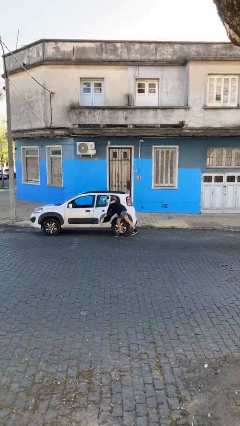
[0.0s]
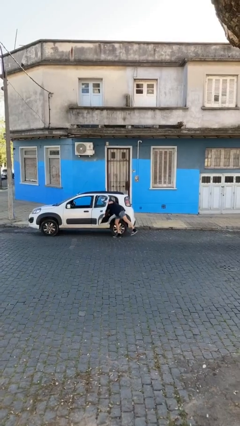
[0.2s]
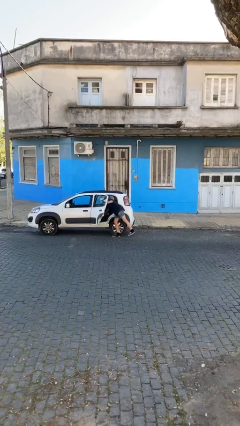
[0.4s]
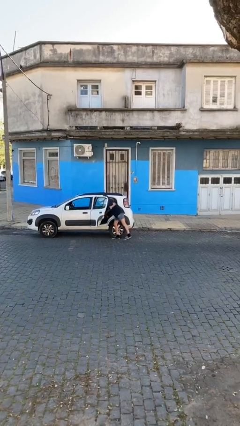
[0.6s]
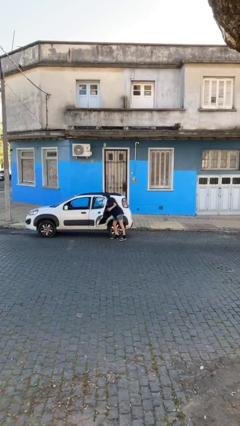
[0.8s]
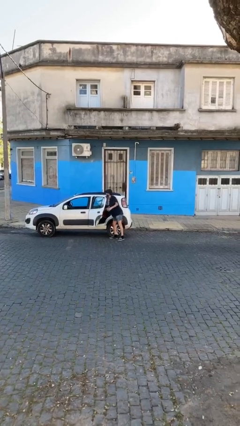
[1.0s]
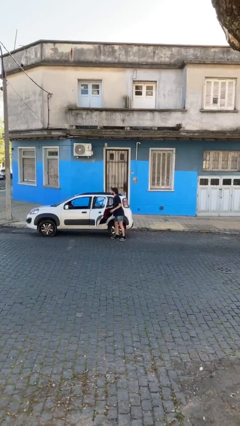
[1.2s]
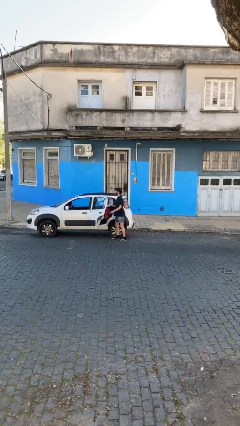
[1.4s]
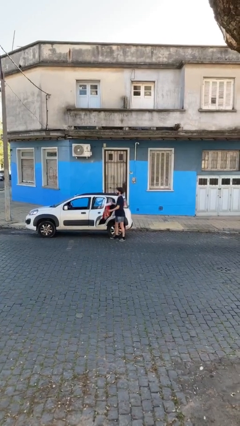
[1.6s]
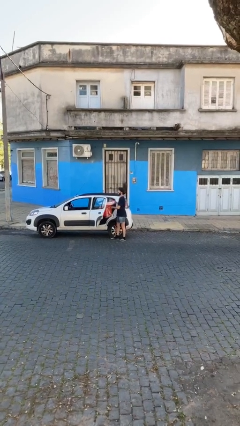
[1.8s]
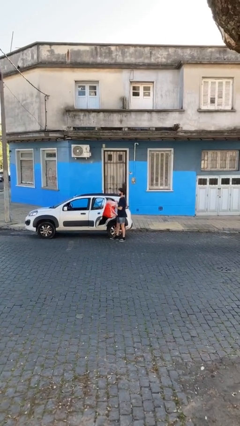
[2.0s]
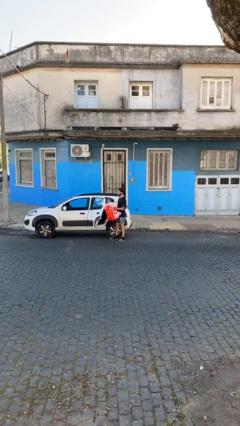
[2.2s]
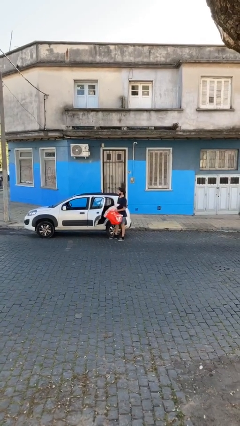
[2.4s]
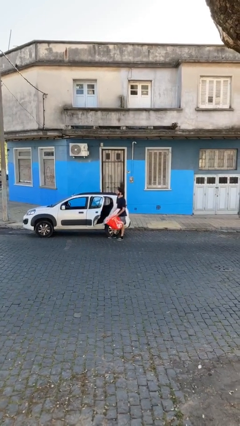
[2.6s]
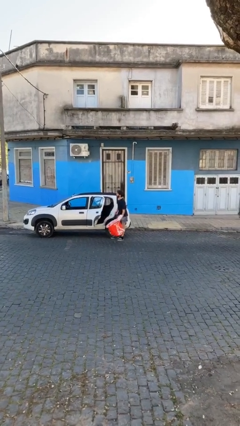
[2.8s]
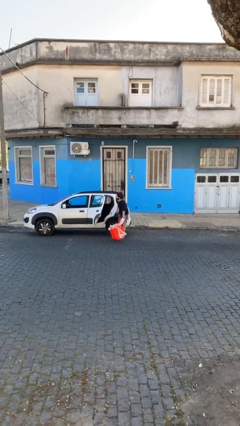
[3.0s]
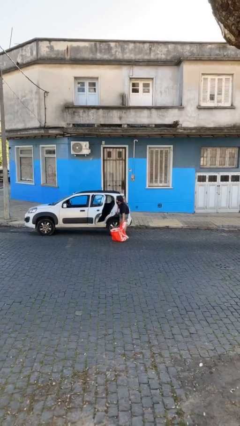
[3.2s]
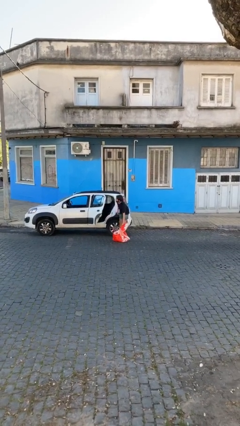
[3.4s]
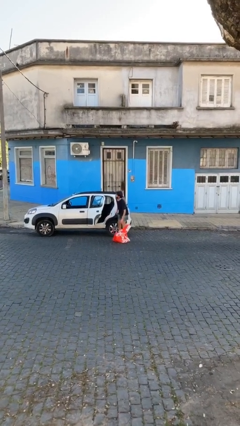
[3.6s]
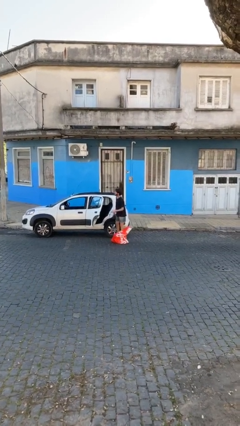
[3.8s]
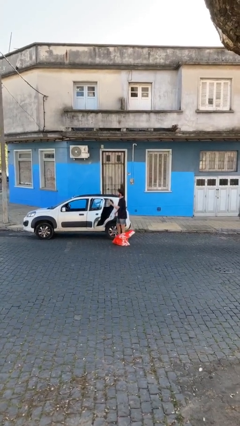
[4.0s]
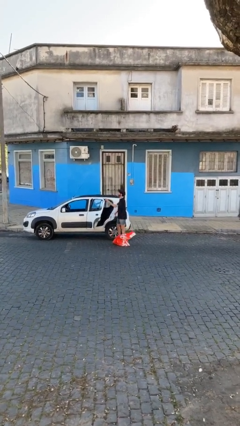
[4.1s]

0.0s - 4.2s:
person unloads car

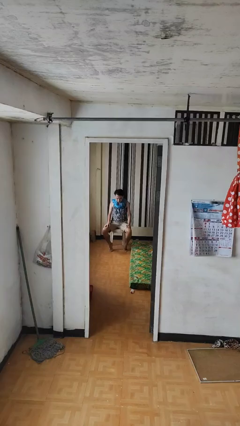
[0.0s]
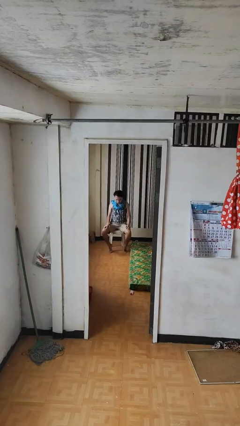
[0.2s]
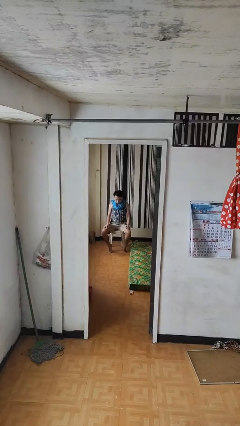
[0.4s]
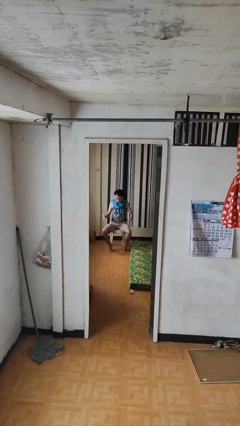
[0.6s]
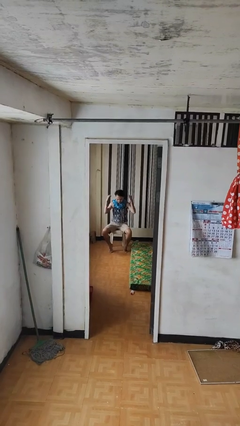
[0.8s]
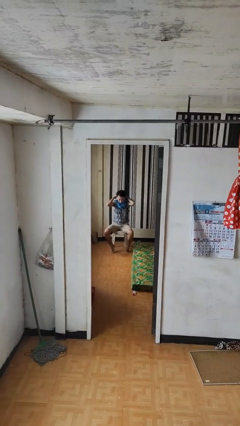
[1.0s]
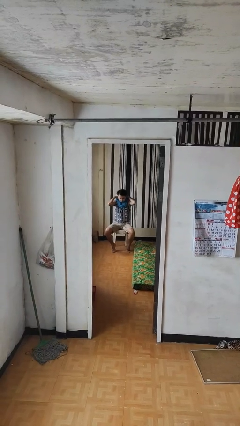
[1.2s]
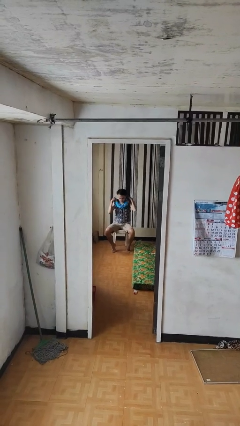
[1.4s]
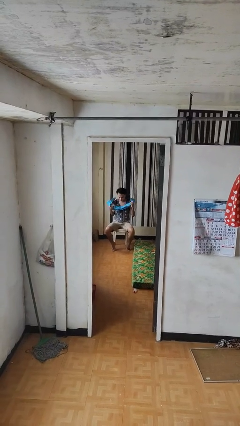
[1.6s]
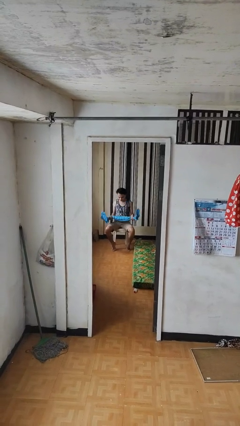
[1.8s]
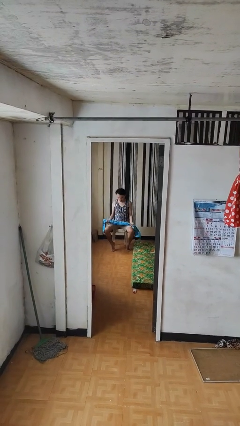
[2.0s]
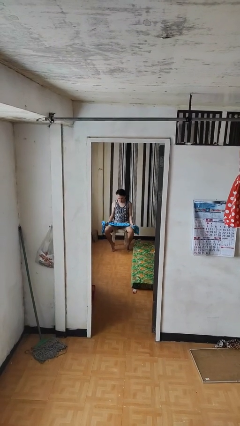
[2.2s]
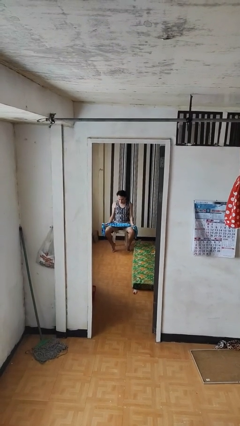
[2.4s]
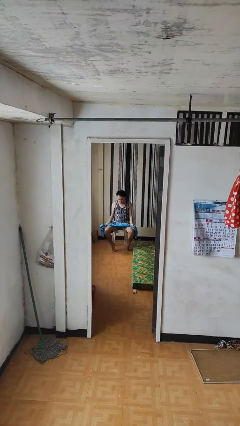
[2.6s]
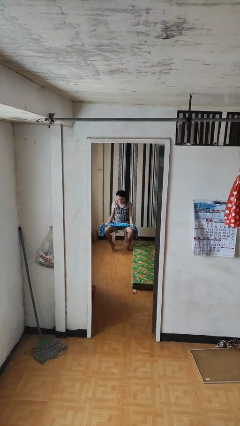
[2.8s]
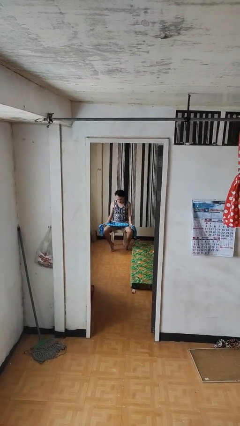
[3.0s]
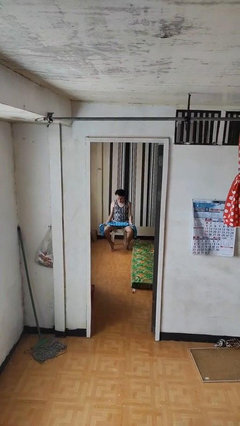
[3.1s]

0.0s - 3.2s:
person takes off scarf

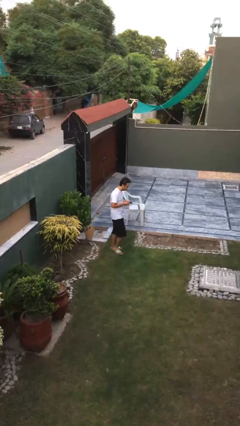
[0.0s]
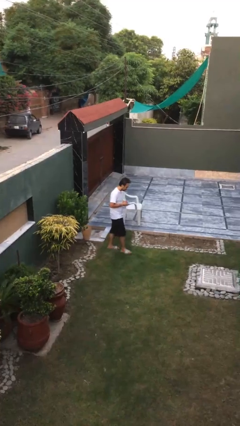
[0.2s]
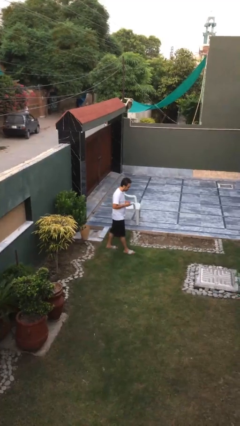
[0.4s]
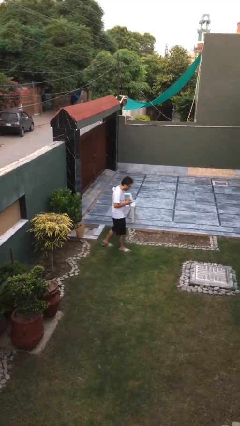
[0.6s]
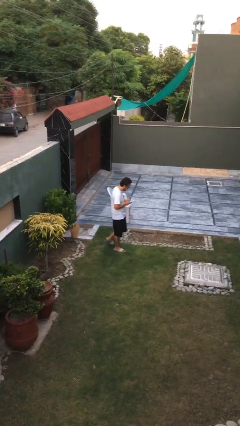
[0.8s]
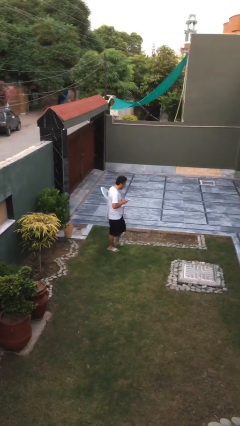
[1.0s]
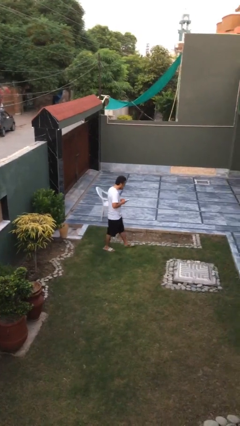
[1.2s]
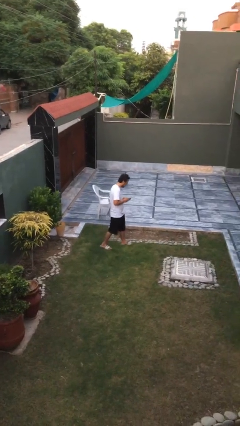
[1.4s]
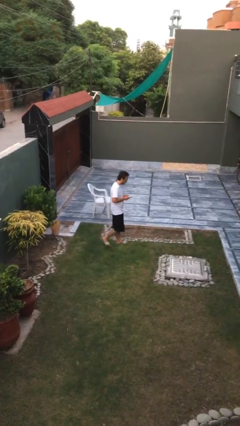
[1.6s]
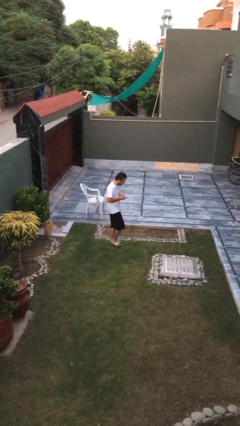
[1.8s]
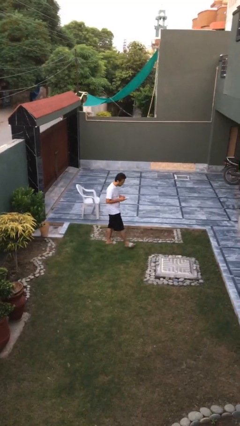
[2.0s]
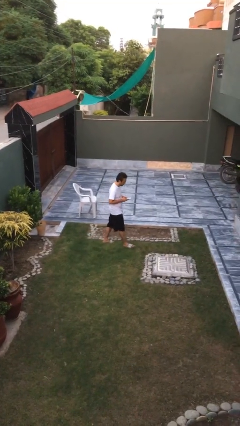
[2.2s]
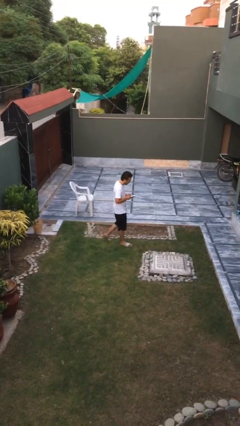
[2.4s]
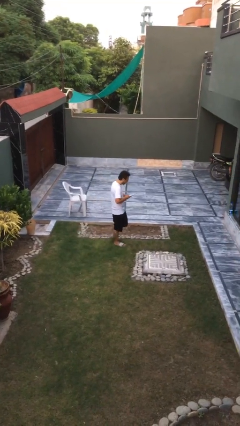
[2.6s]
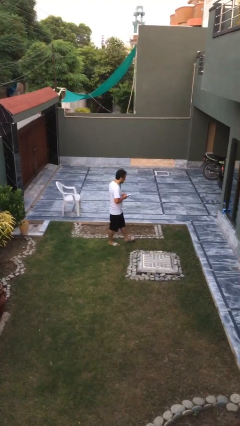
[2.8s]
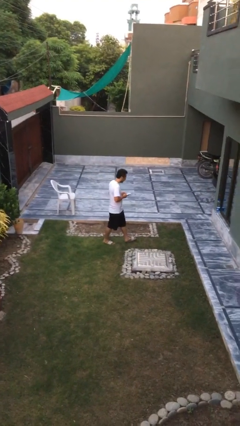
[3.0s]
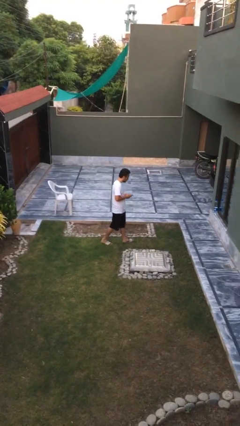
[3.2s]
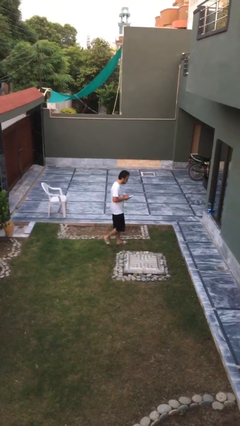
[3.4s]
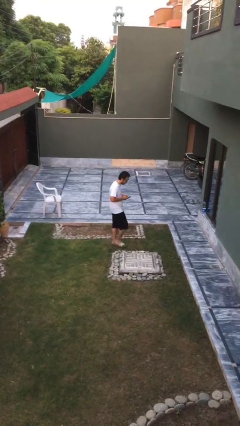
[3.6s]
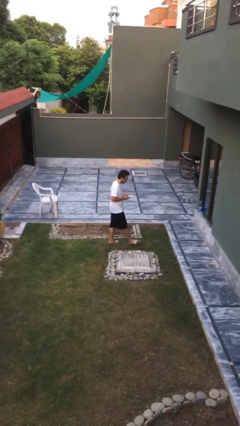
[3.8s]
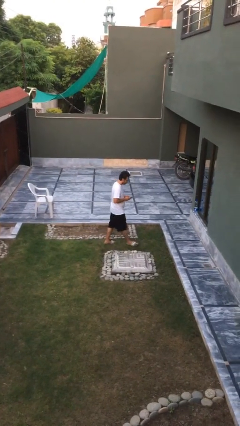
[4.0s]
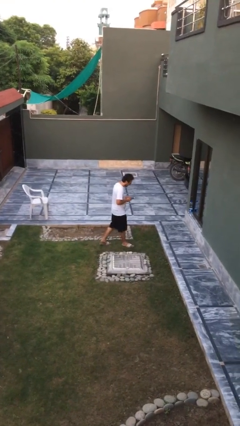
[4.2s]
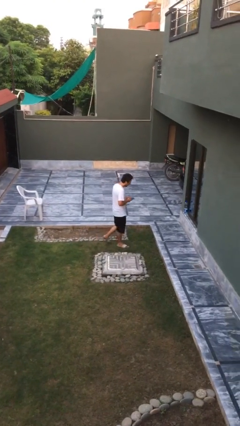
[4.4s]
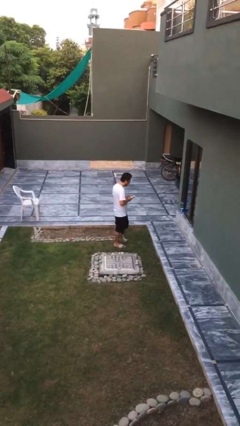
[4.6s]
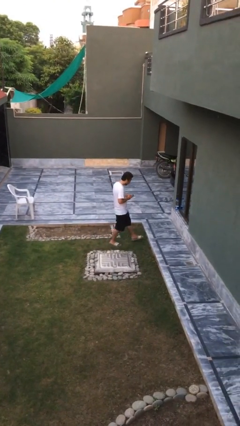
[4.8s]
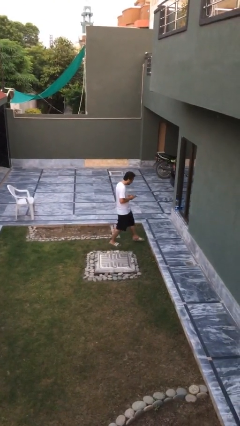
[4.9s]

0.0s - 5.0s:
person texts on phone

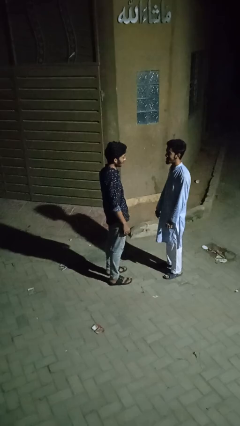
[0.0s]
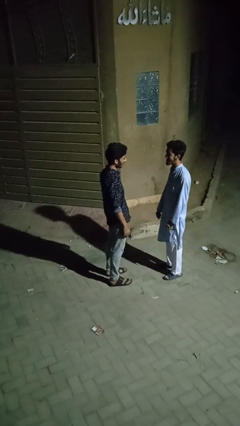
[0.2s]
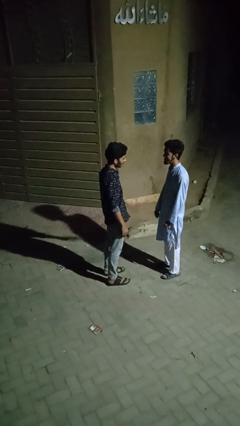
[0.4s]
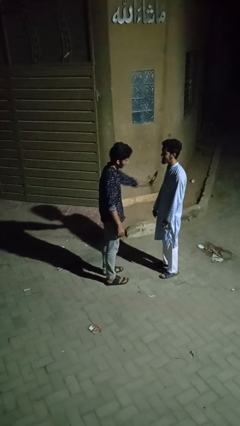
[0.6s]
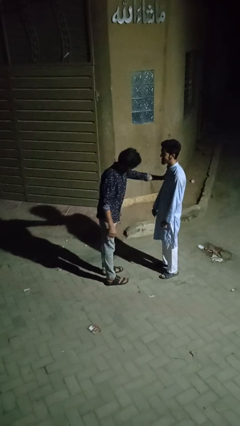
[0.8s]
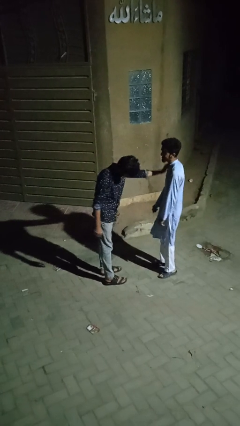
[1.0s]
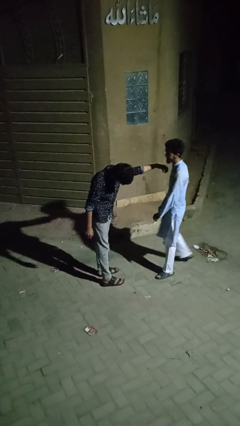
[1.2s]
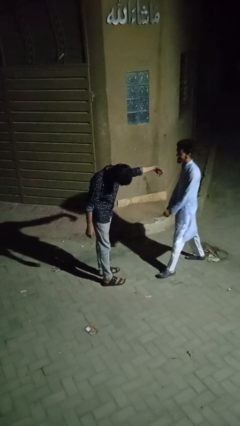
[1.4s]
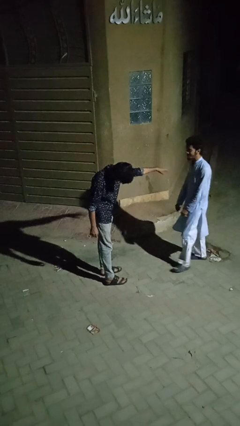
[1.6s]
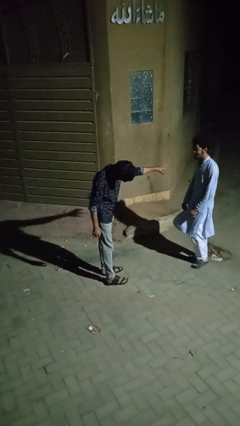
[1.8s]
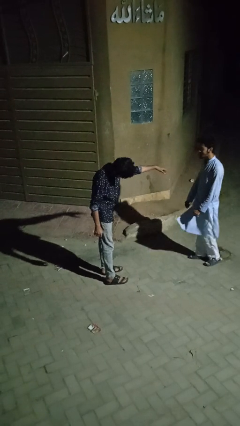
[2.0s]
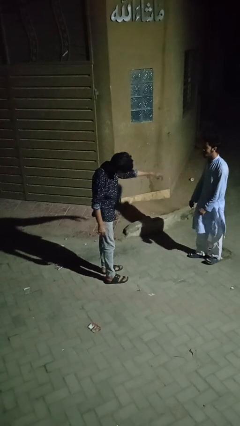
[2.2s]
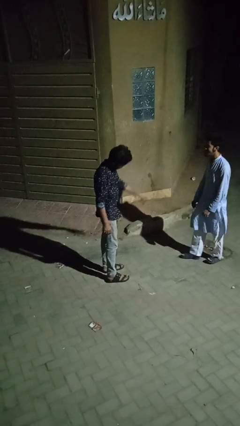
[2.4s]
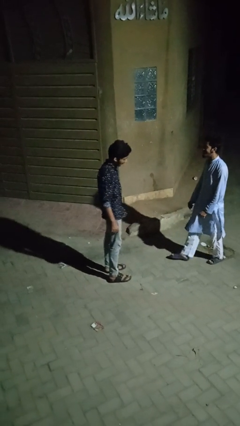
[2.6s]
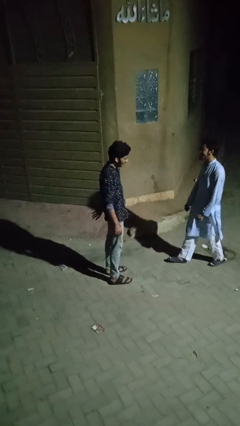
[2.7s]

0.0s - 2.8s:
person shoves person

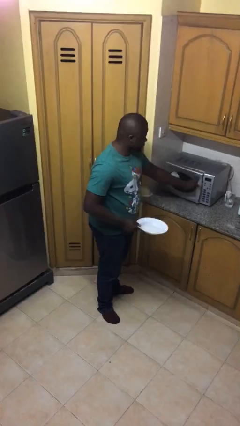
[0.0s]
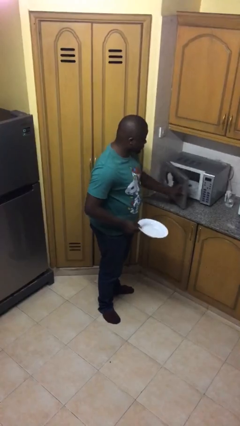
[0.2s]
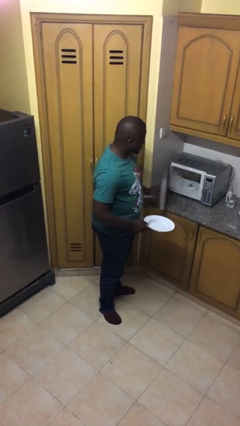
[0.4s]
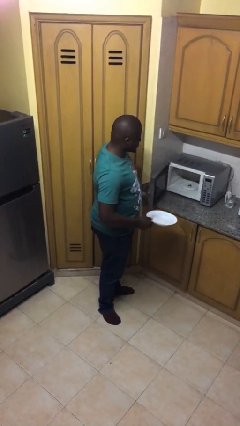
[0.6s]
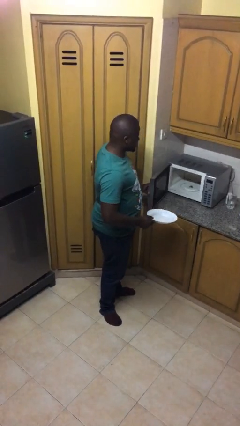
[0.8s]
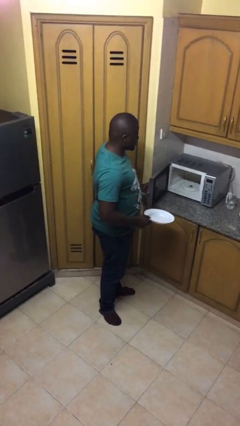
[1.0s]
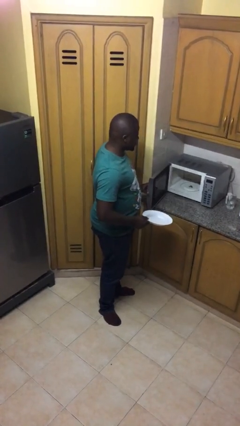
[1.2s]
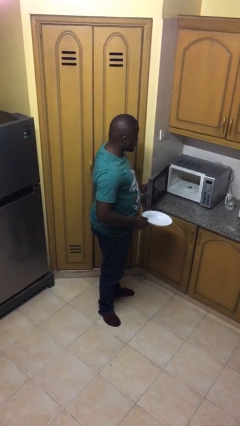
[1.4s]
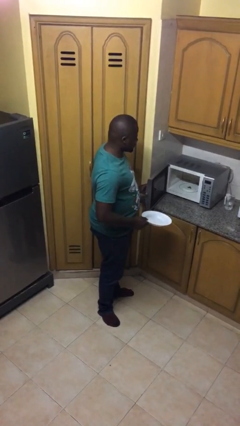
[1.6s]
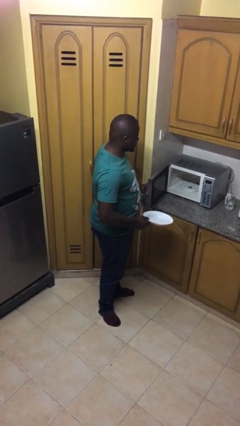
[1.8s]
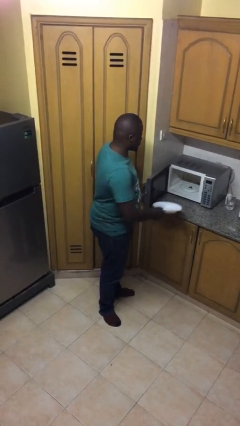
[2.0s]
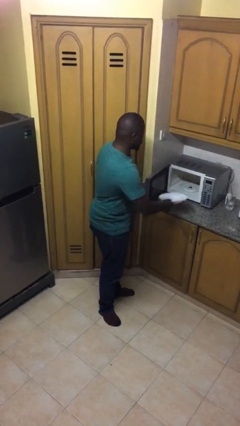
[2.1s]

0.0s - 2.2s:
person opens microwave

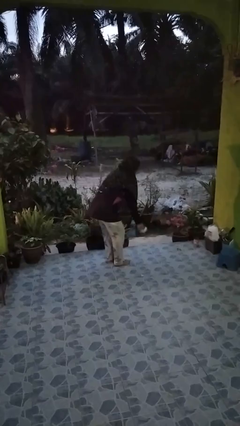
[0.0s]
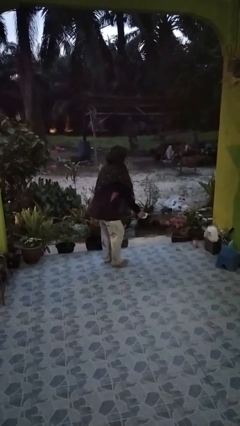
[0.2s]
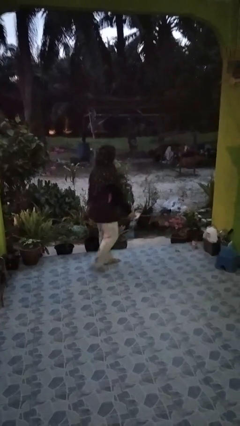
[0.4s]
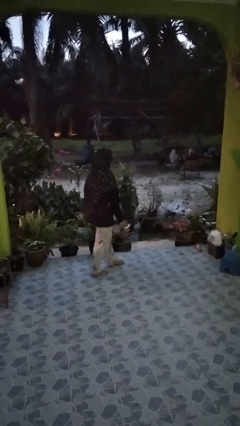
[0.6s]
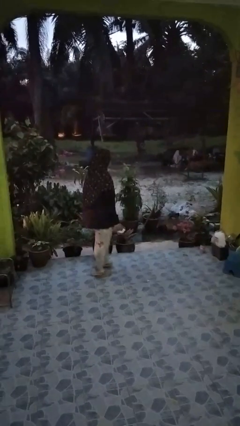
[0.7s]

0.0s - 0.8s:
person picks up object from floor
